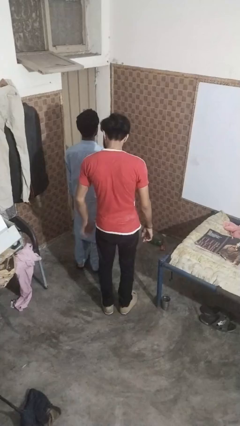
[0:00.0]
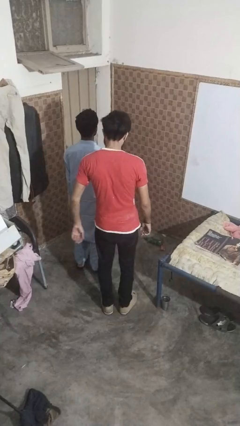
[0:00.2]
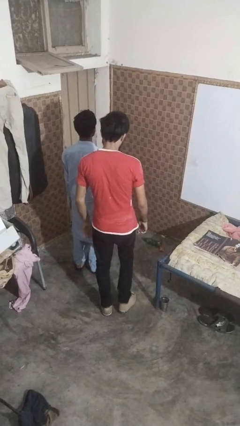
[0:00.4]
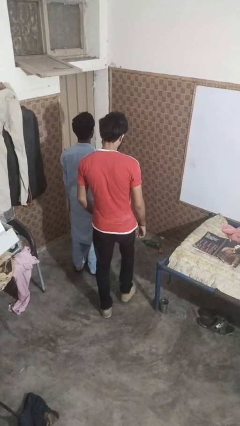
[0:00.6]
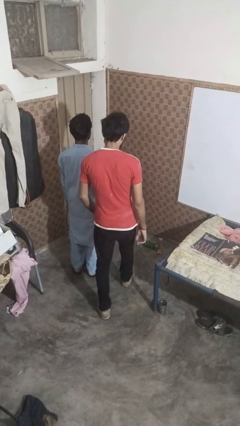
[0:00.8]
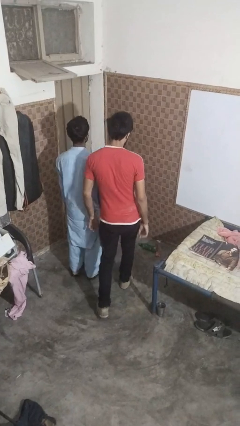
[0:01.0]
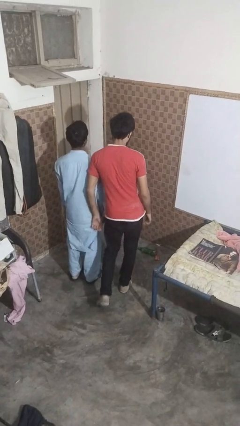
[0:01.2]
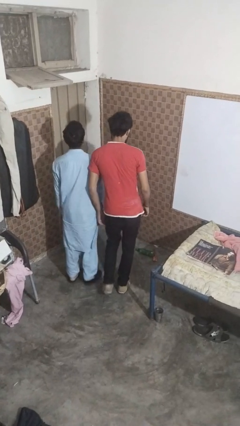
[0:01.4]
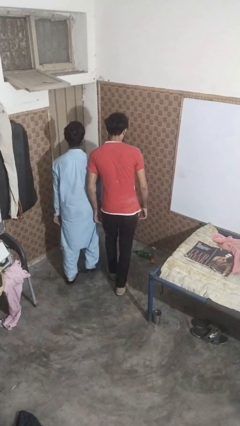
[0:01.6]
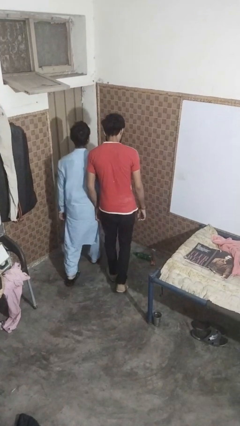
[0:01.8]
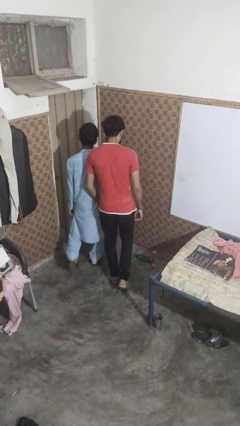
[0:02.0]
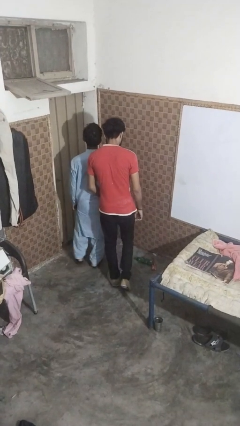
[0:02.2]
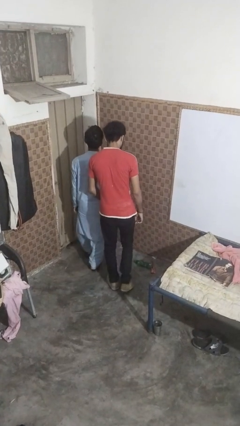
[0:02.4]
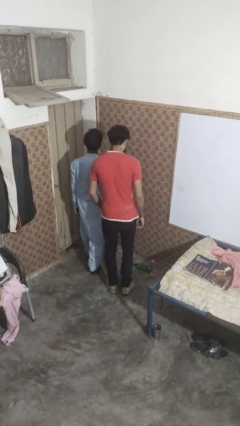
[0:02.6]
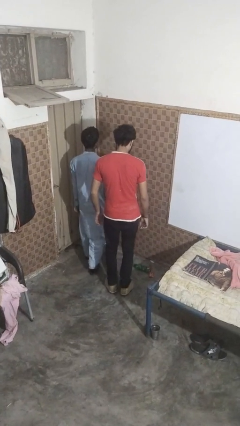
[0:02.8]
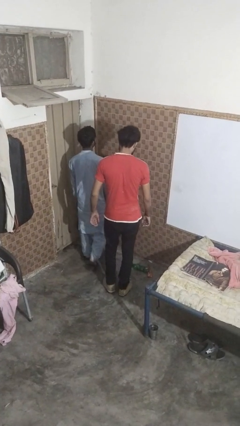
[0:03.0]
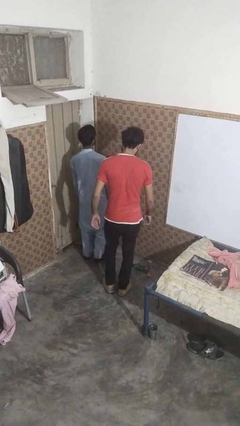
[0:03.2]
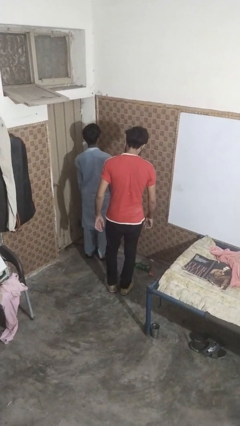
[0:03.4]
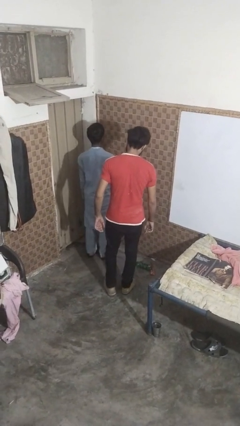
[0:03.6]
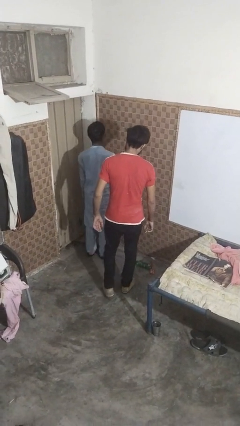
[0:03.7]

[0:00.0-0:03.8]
person bumps into person

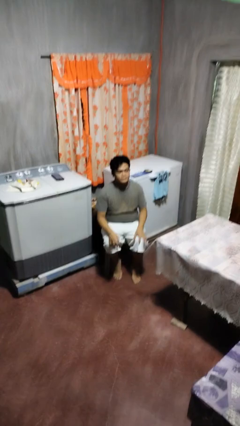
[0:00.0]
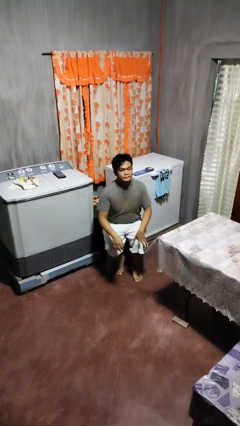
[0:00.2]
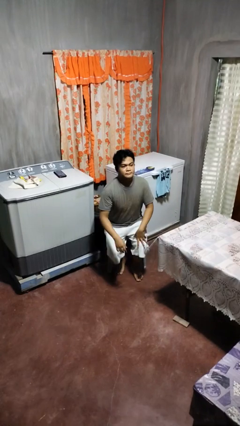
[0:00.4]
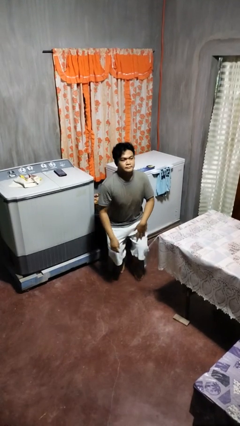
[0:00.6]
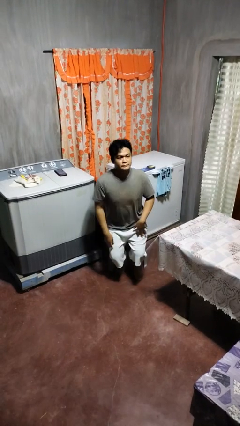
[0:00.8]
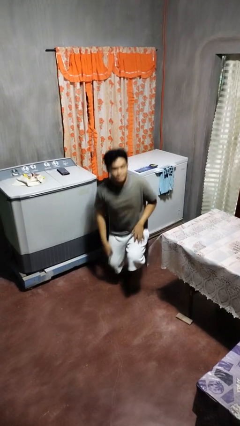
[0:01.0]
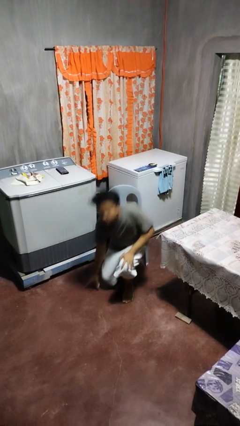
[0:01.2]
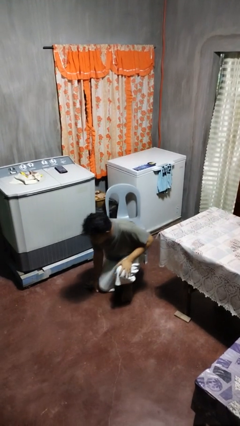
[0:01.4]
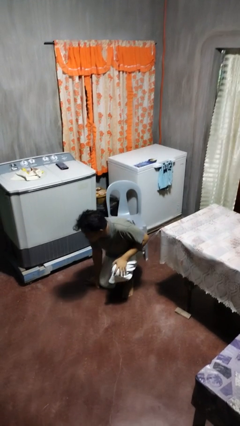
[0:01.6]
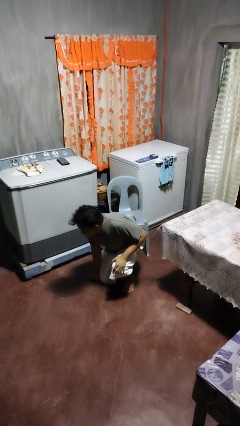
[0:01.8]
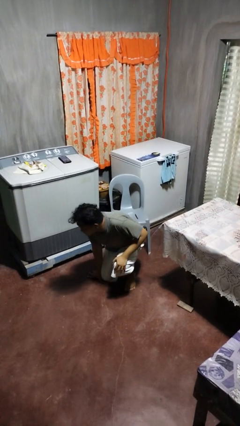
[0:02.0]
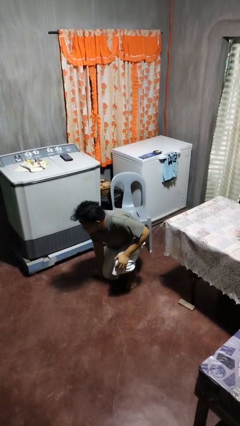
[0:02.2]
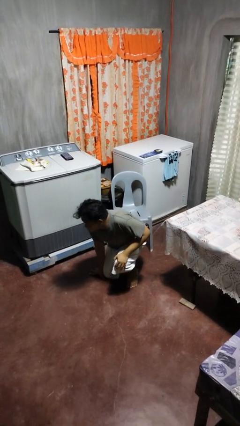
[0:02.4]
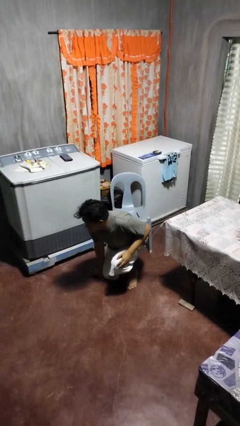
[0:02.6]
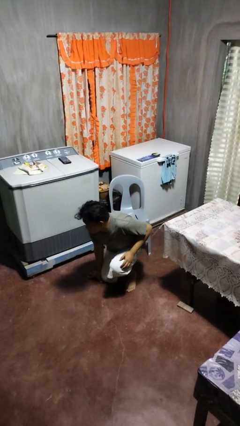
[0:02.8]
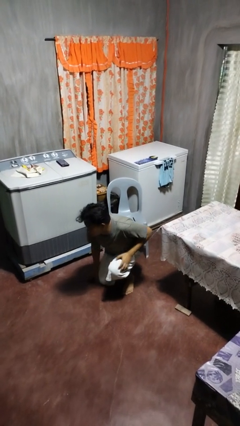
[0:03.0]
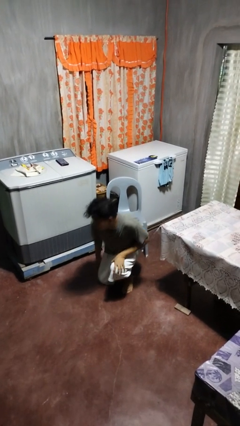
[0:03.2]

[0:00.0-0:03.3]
person falls from chair

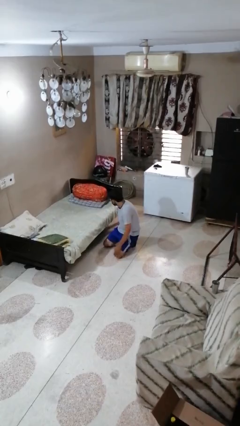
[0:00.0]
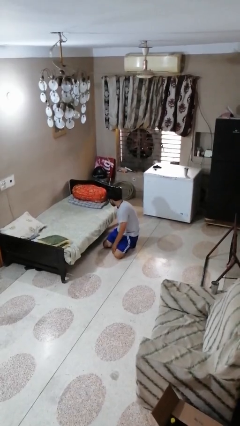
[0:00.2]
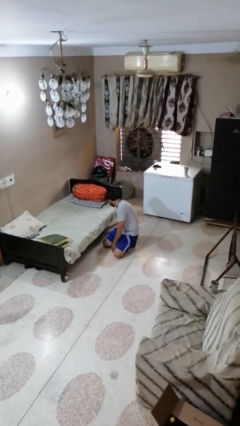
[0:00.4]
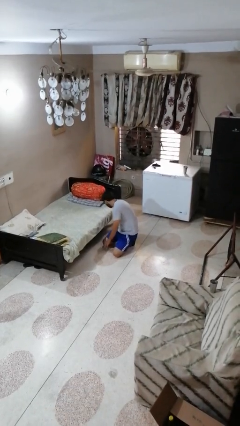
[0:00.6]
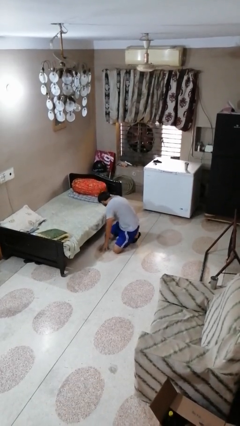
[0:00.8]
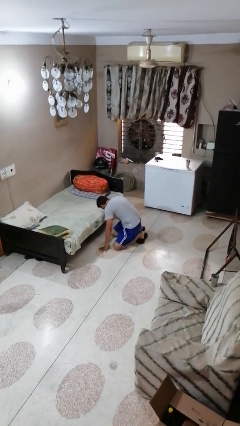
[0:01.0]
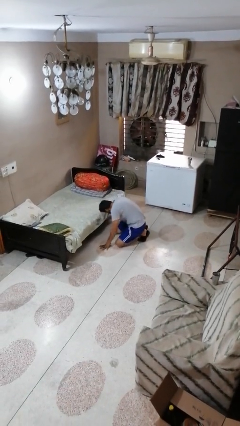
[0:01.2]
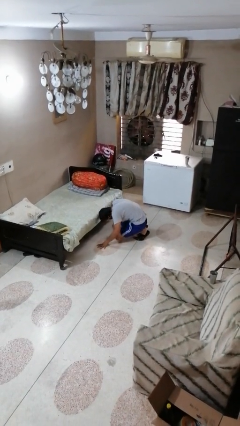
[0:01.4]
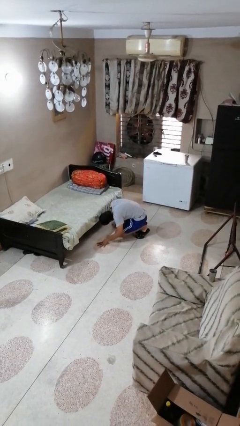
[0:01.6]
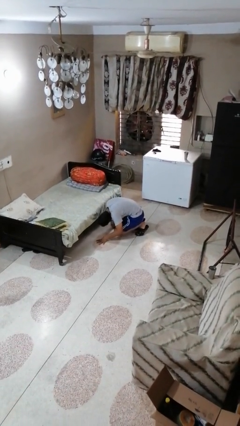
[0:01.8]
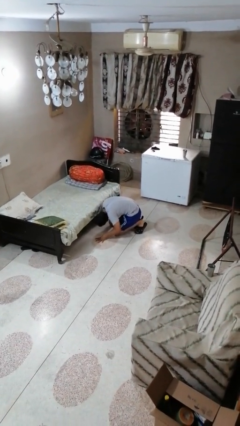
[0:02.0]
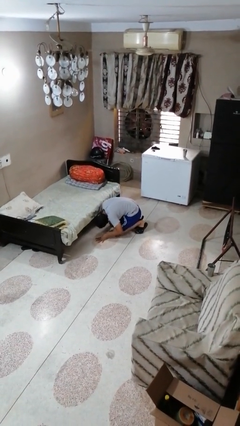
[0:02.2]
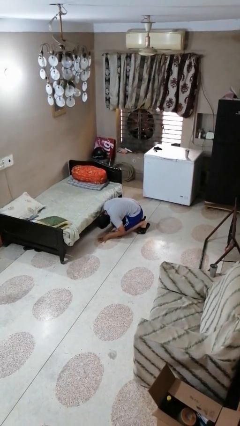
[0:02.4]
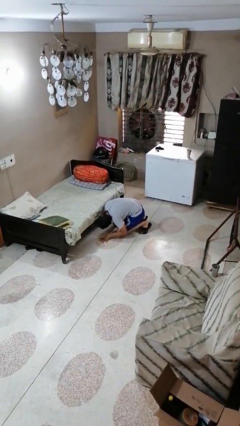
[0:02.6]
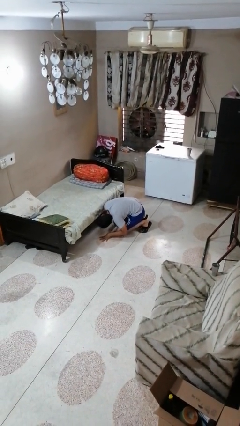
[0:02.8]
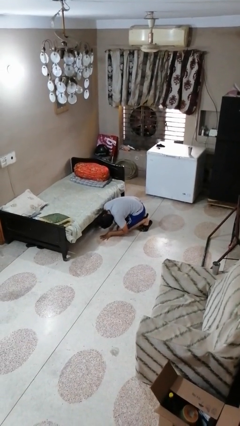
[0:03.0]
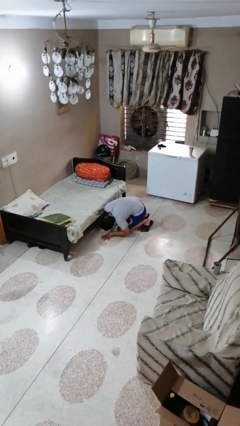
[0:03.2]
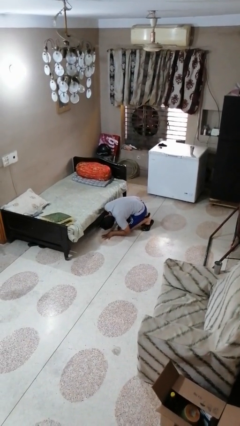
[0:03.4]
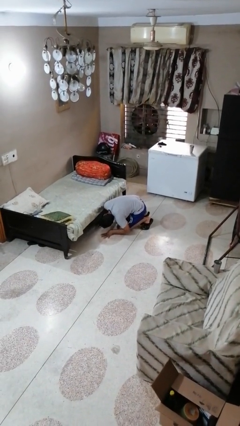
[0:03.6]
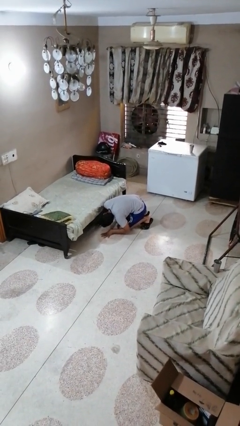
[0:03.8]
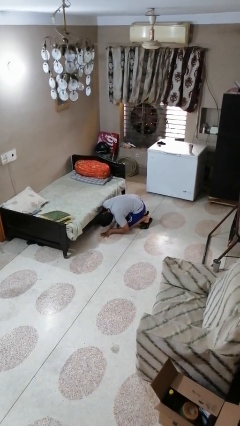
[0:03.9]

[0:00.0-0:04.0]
person searches under bed

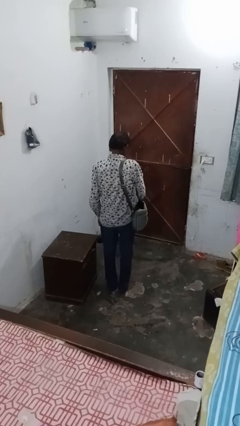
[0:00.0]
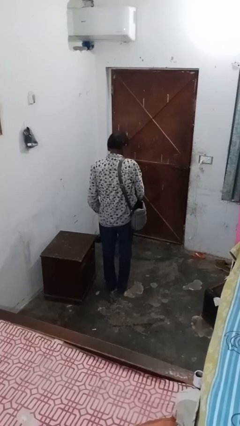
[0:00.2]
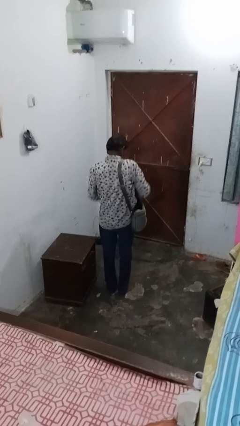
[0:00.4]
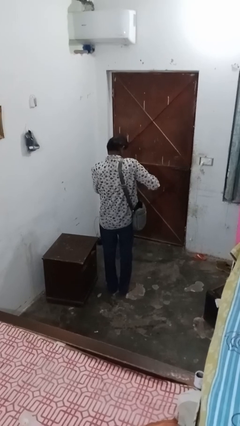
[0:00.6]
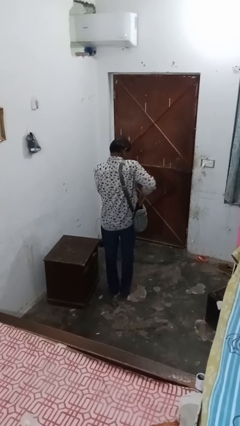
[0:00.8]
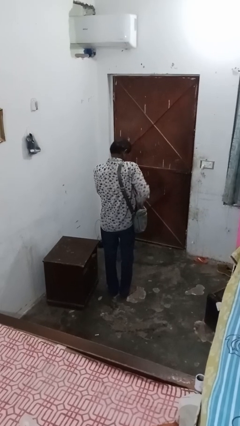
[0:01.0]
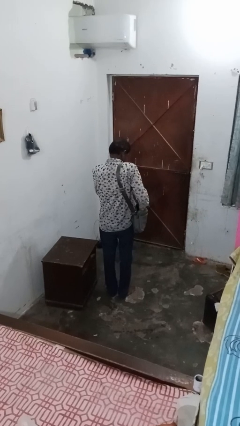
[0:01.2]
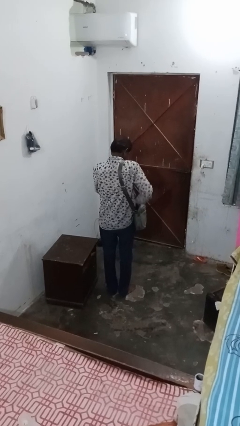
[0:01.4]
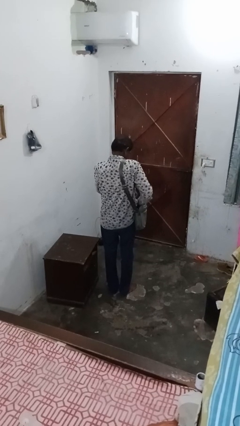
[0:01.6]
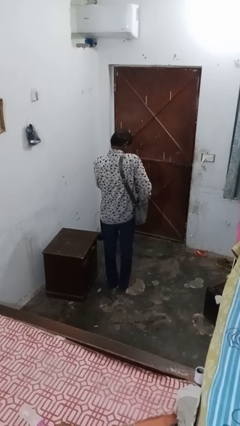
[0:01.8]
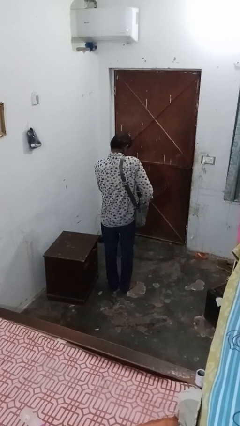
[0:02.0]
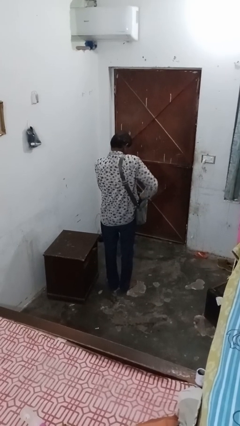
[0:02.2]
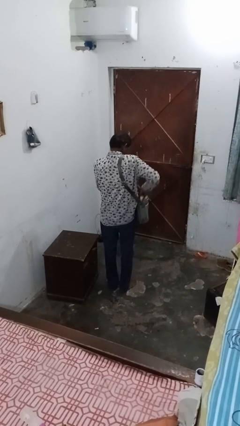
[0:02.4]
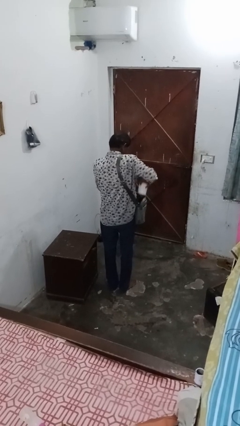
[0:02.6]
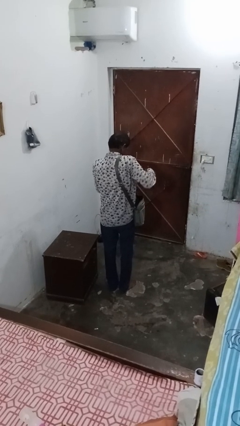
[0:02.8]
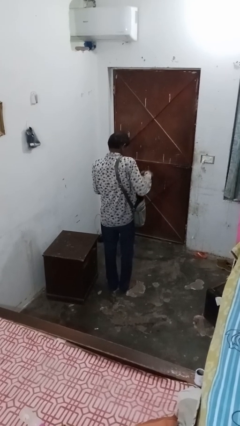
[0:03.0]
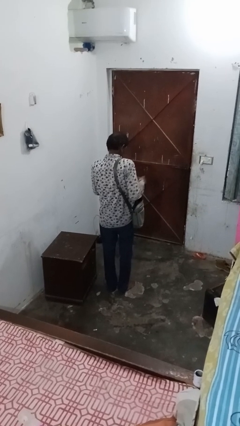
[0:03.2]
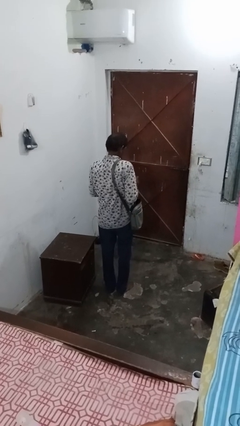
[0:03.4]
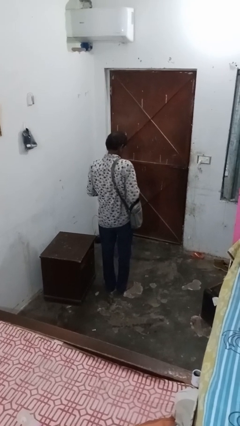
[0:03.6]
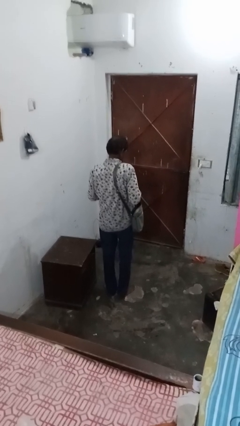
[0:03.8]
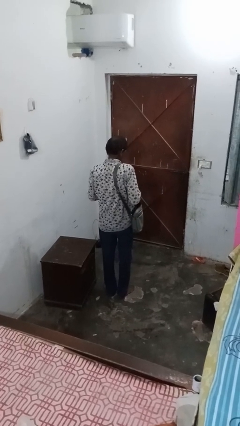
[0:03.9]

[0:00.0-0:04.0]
person takes object from bag

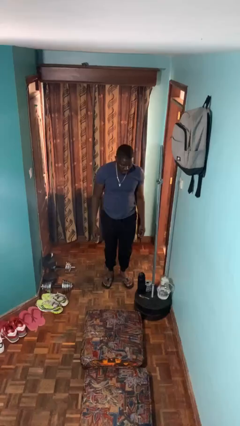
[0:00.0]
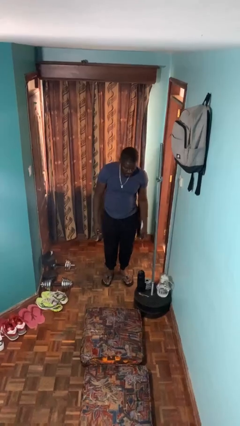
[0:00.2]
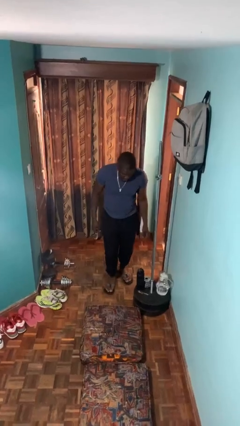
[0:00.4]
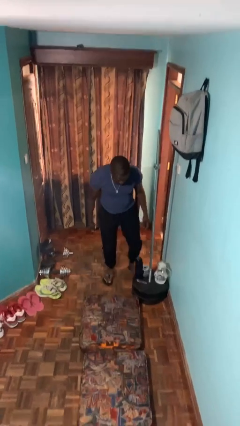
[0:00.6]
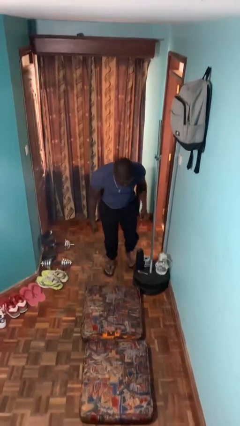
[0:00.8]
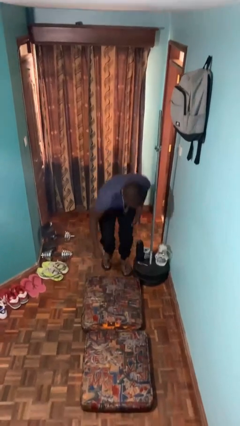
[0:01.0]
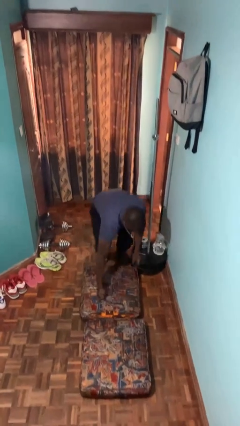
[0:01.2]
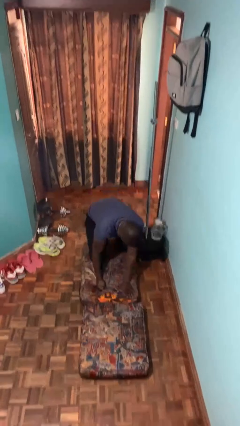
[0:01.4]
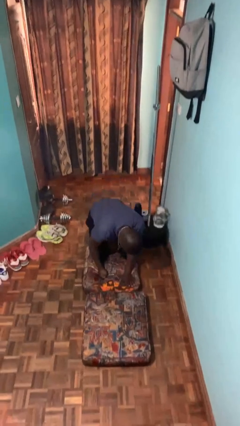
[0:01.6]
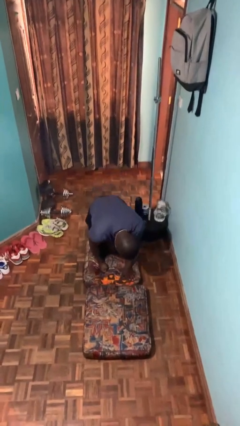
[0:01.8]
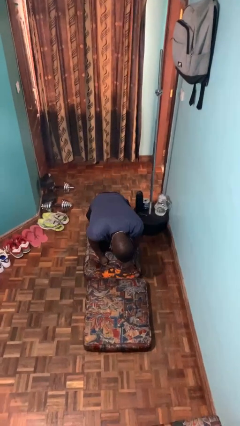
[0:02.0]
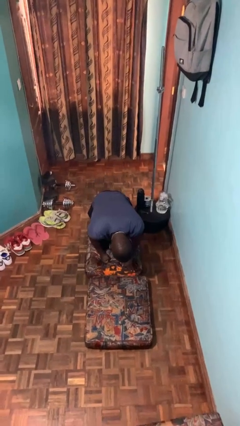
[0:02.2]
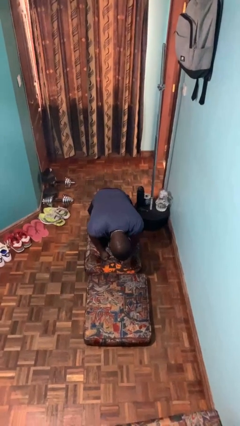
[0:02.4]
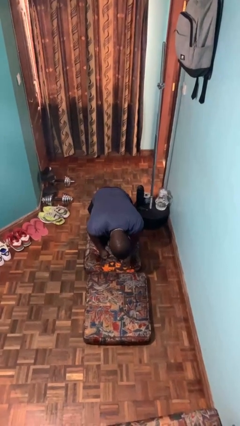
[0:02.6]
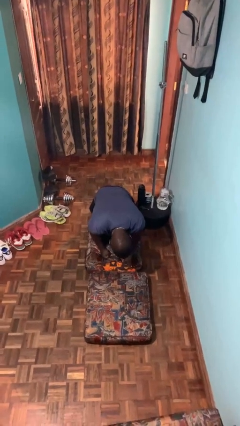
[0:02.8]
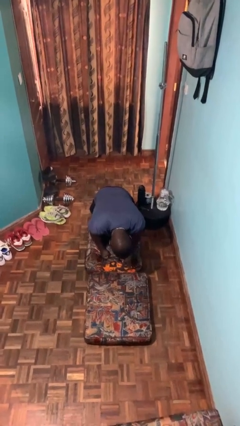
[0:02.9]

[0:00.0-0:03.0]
person trips on object on floor
